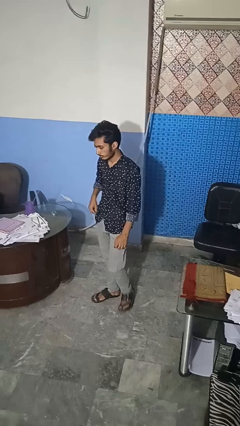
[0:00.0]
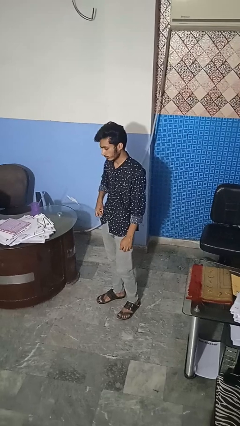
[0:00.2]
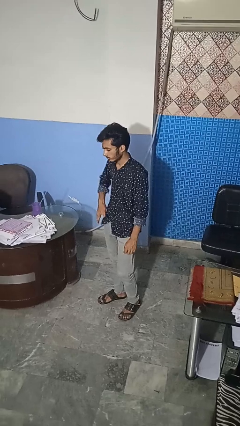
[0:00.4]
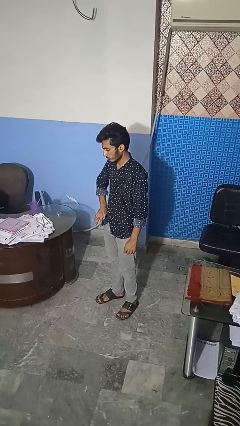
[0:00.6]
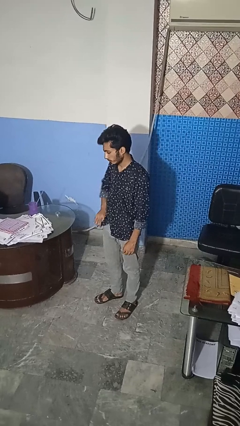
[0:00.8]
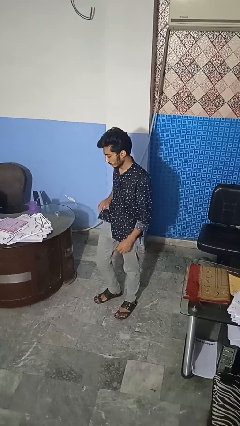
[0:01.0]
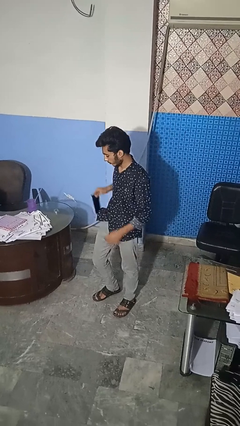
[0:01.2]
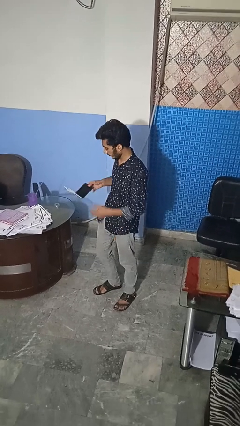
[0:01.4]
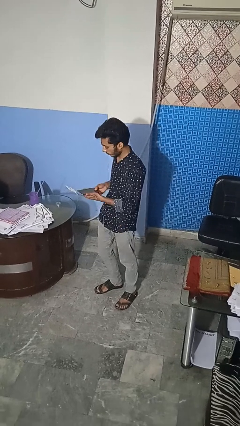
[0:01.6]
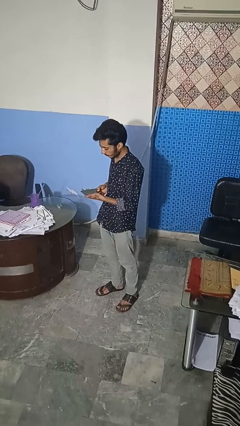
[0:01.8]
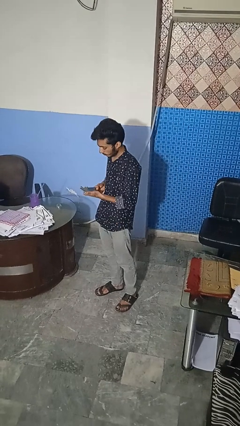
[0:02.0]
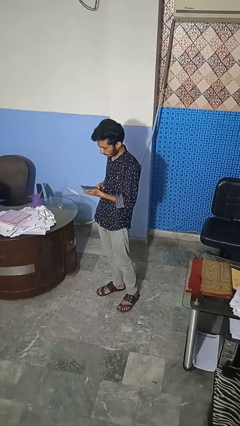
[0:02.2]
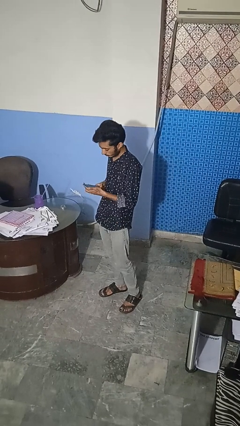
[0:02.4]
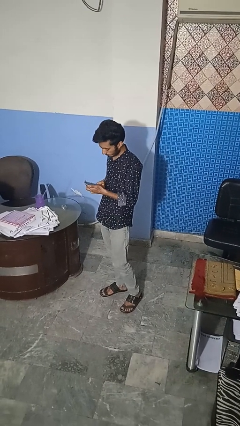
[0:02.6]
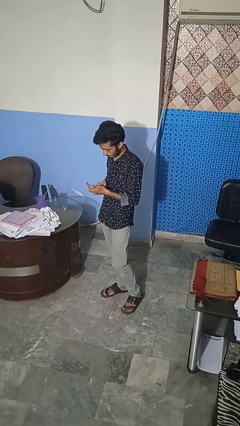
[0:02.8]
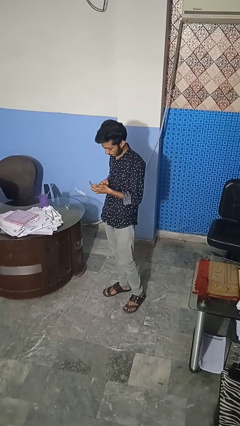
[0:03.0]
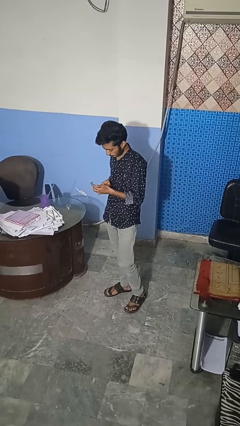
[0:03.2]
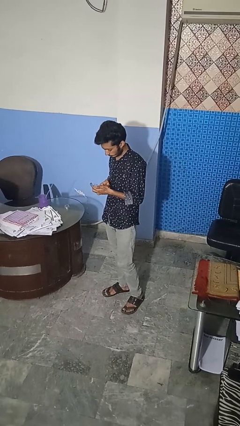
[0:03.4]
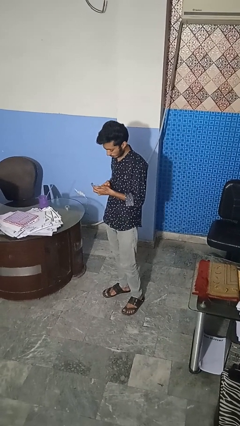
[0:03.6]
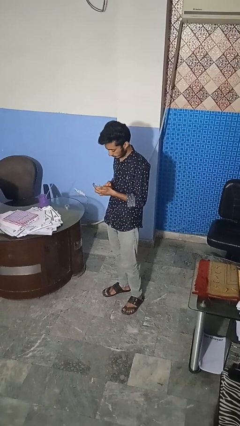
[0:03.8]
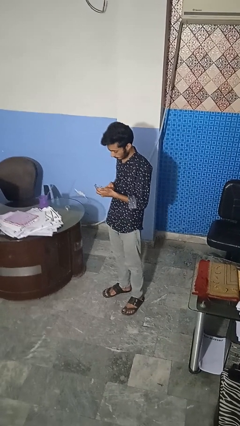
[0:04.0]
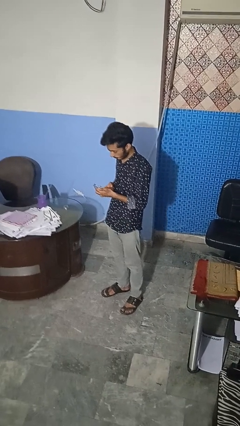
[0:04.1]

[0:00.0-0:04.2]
person takes phone from pocket

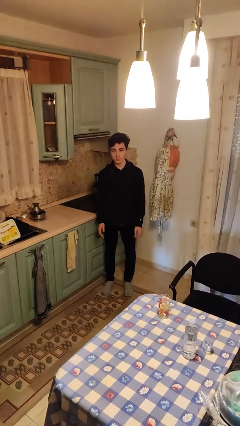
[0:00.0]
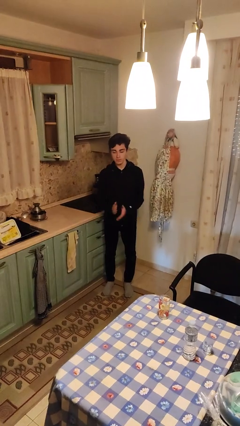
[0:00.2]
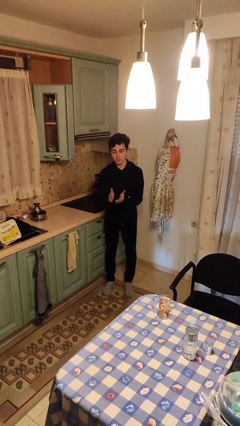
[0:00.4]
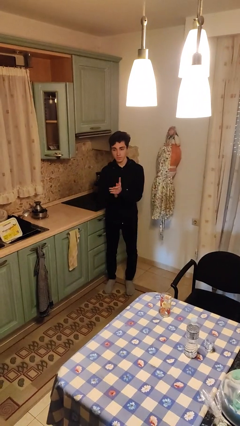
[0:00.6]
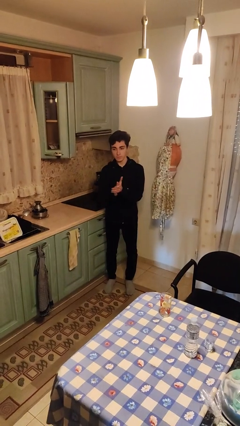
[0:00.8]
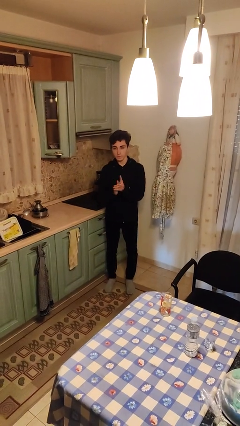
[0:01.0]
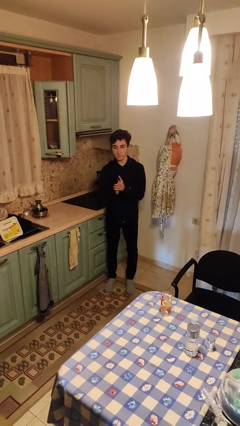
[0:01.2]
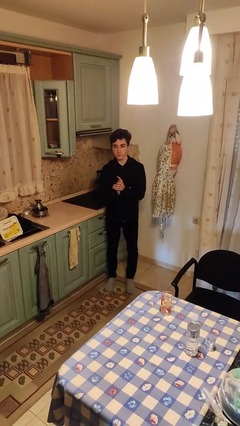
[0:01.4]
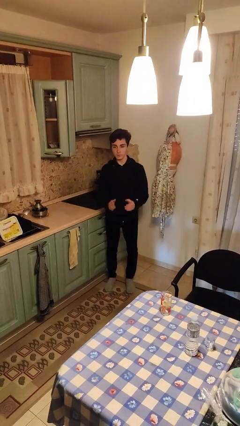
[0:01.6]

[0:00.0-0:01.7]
person claps hands

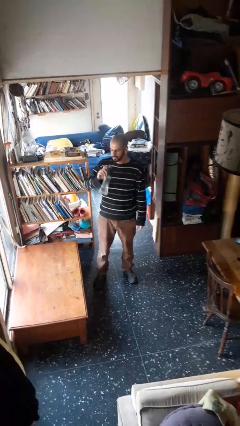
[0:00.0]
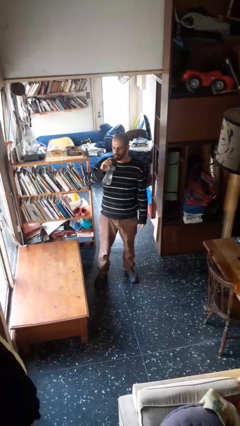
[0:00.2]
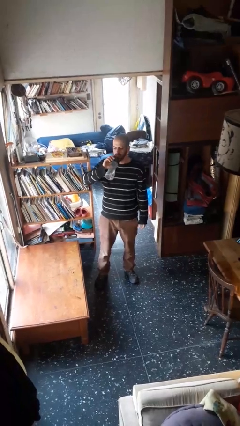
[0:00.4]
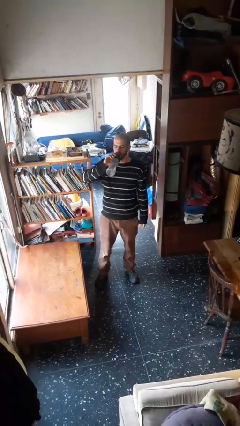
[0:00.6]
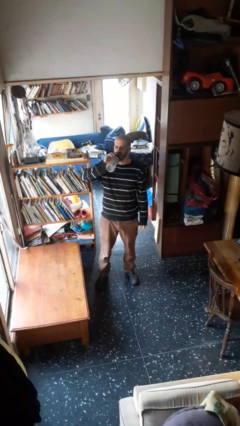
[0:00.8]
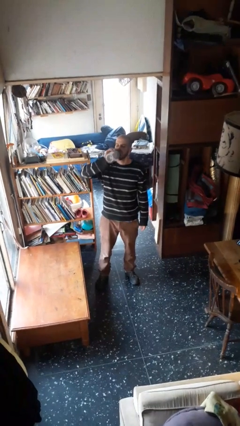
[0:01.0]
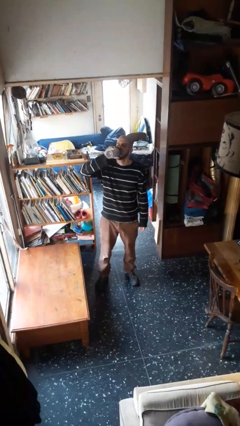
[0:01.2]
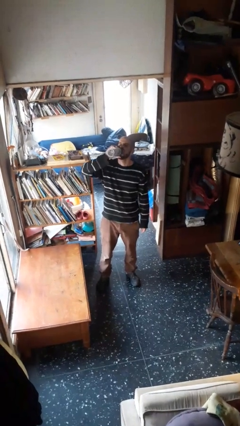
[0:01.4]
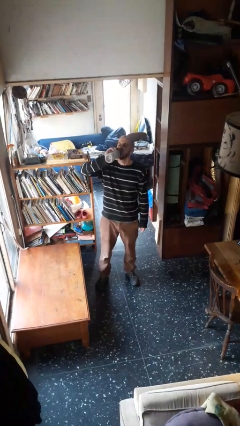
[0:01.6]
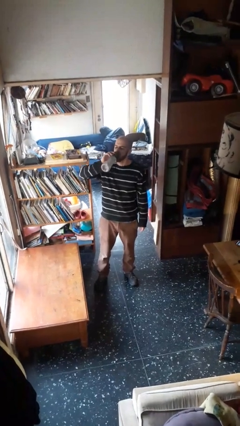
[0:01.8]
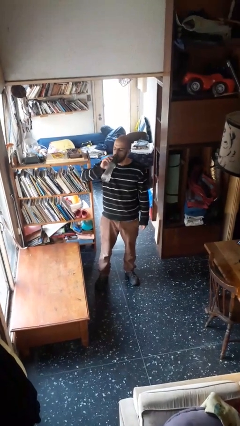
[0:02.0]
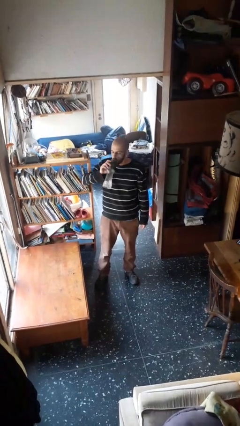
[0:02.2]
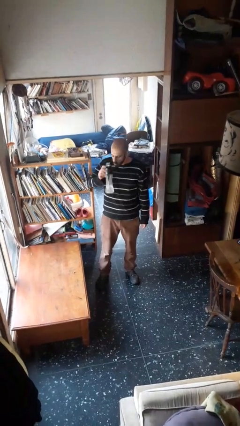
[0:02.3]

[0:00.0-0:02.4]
person drinks from bottle

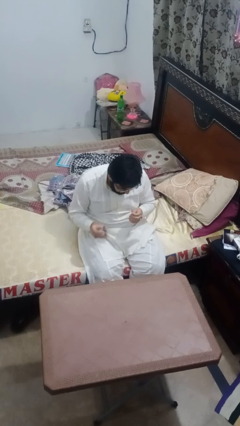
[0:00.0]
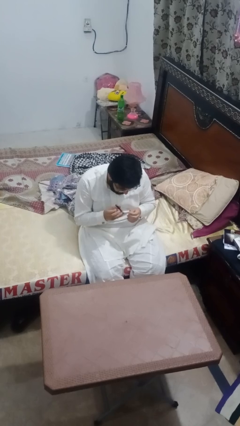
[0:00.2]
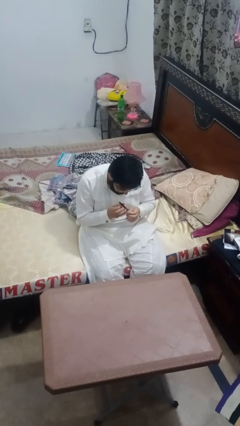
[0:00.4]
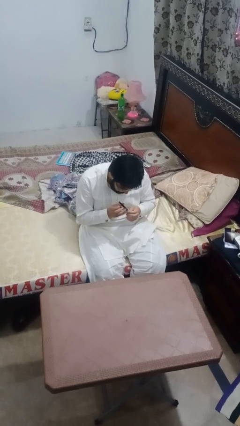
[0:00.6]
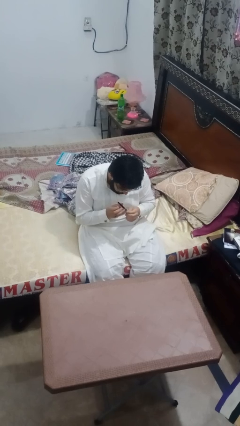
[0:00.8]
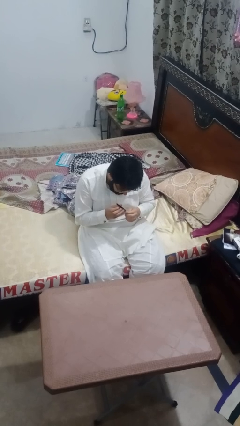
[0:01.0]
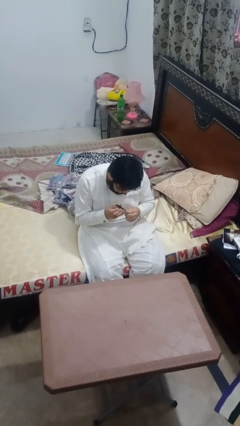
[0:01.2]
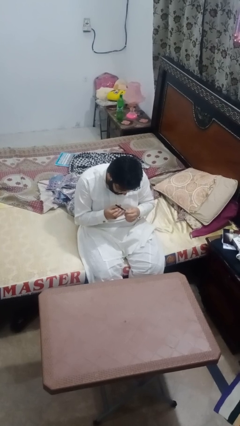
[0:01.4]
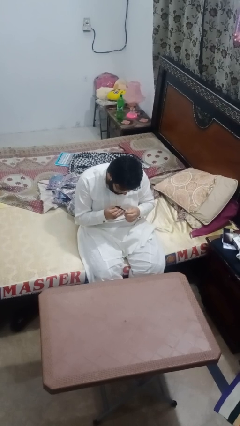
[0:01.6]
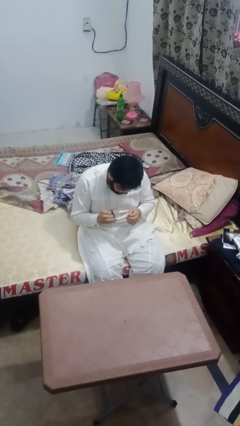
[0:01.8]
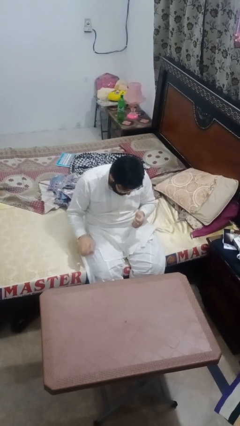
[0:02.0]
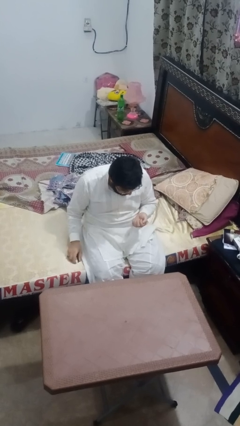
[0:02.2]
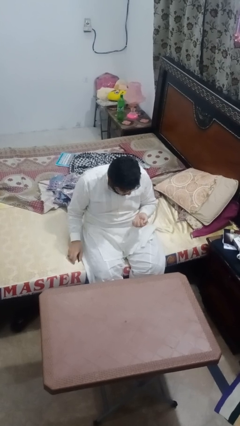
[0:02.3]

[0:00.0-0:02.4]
person clips fingernails

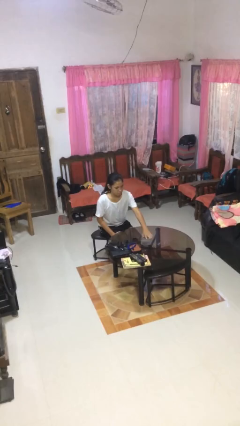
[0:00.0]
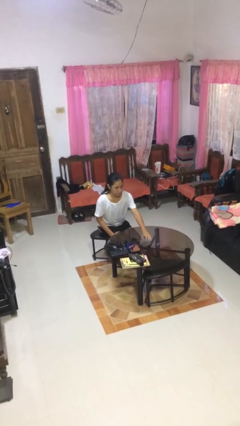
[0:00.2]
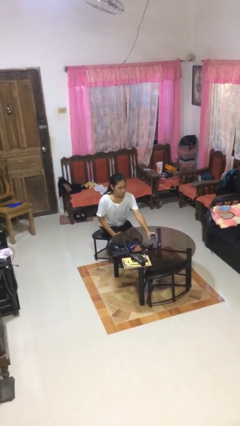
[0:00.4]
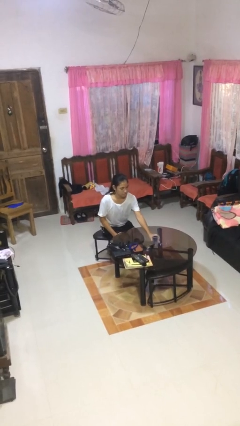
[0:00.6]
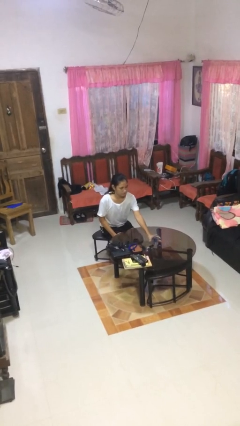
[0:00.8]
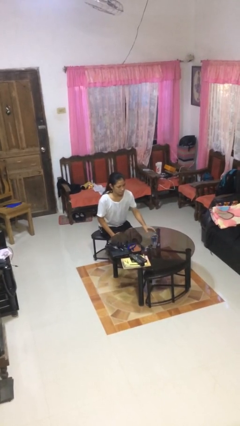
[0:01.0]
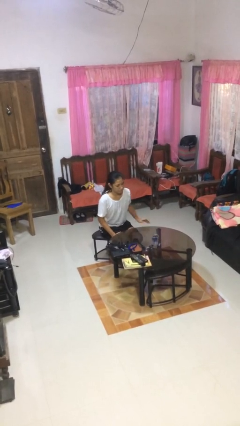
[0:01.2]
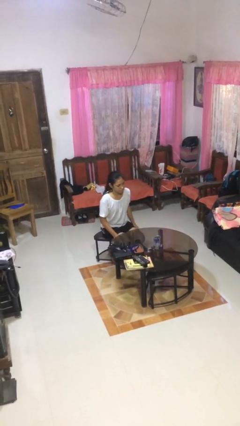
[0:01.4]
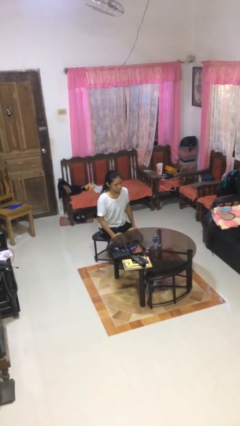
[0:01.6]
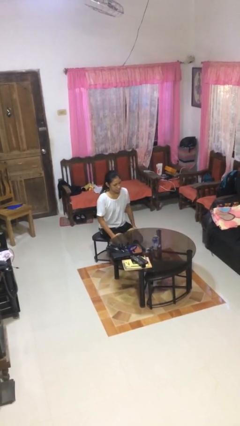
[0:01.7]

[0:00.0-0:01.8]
person sets upright glass

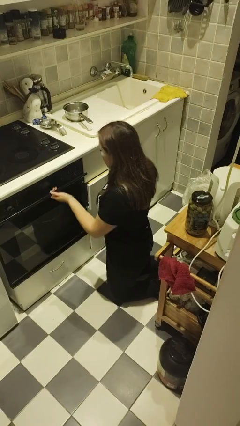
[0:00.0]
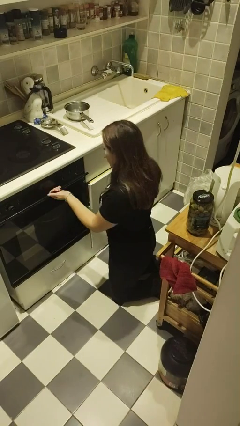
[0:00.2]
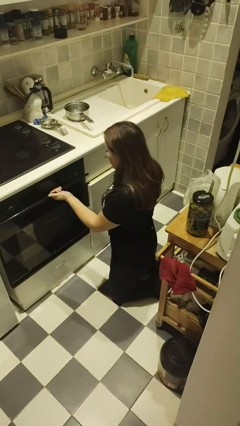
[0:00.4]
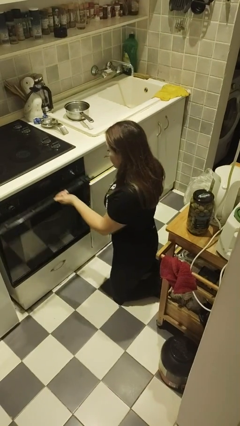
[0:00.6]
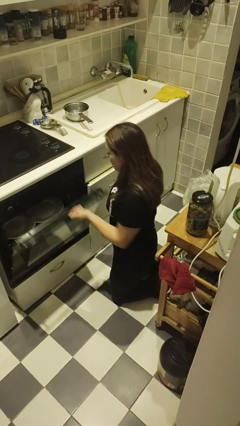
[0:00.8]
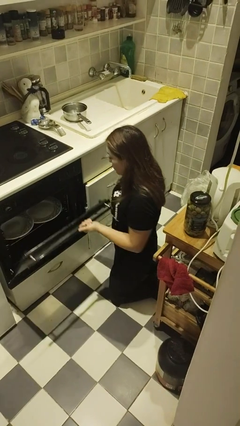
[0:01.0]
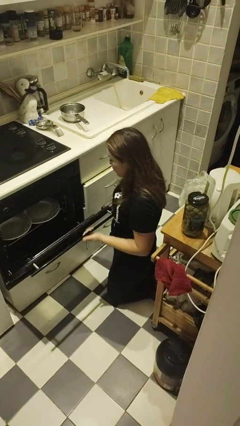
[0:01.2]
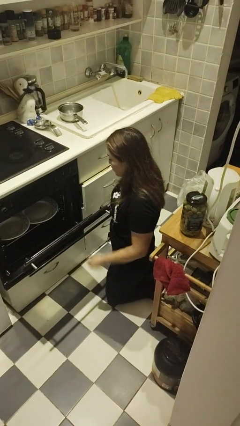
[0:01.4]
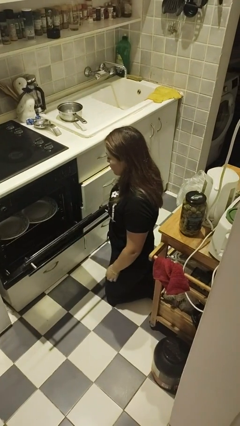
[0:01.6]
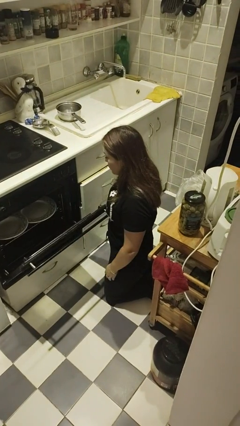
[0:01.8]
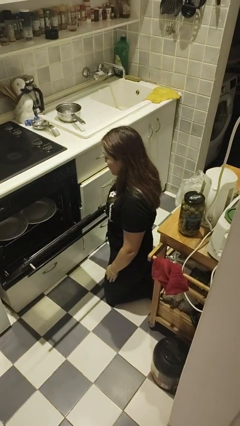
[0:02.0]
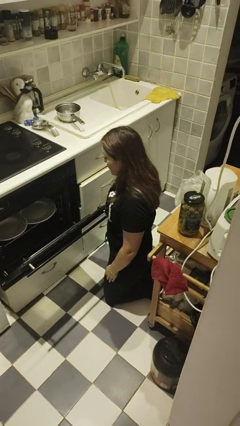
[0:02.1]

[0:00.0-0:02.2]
person opens oven door

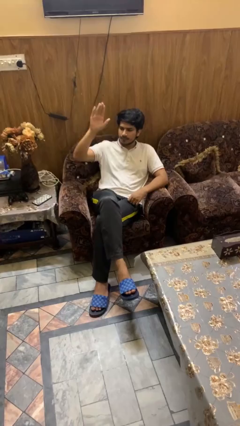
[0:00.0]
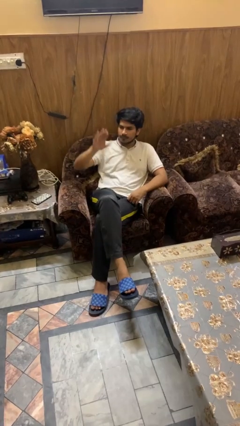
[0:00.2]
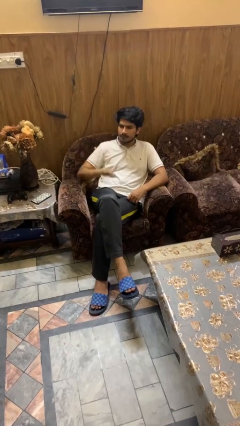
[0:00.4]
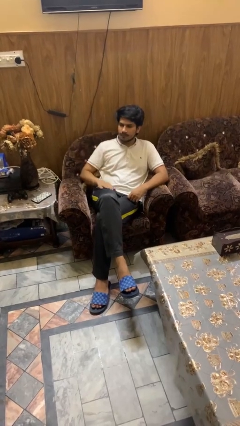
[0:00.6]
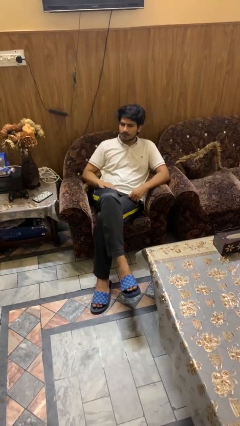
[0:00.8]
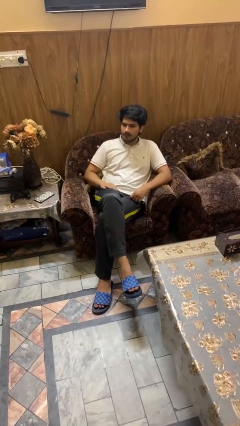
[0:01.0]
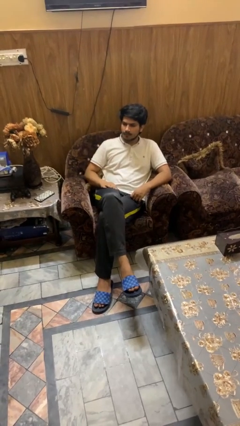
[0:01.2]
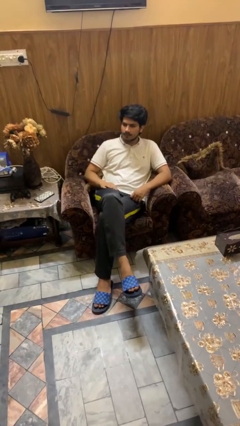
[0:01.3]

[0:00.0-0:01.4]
person gestures lower hand

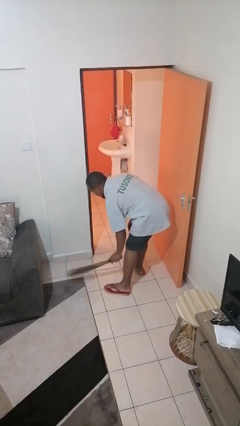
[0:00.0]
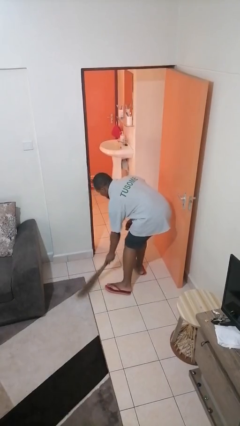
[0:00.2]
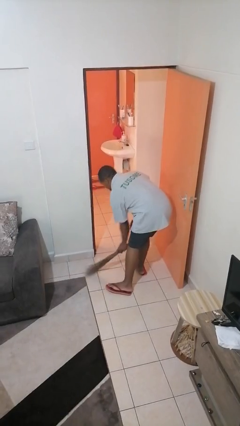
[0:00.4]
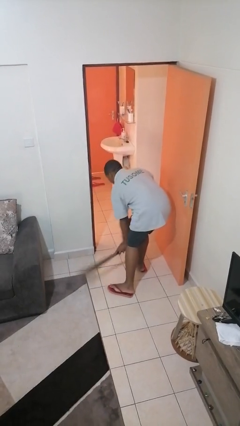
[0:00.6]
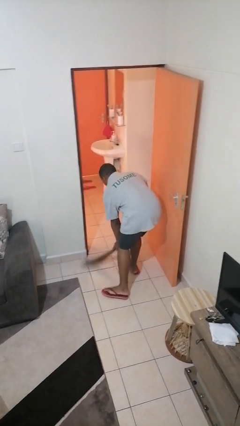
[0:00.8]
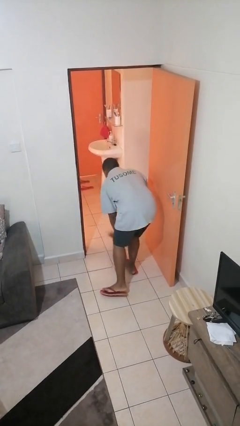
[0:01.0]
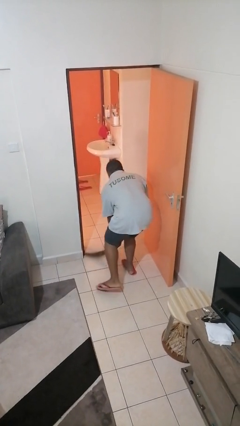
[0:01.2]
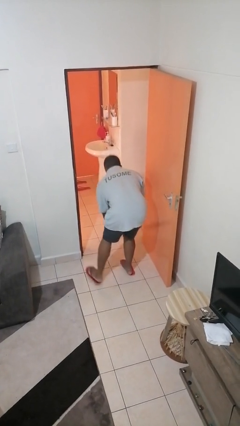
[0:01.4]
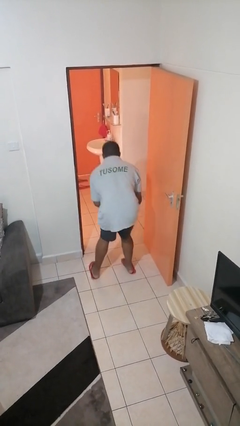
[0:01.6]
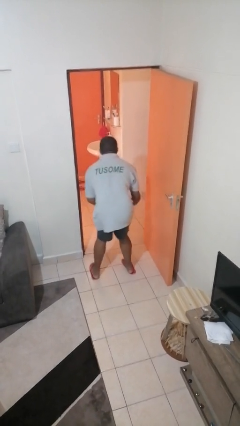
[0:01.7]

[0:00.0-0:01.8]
person sweeps floor
